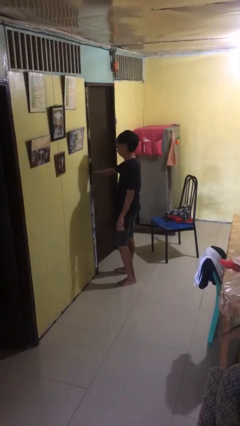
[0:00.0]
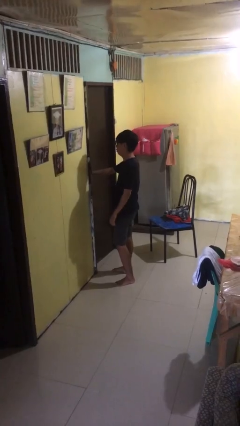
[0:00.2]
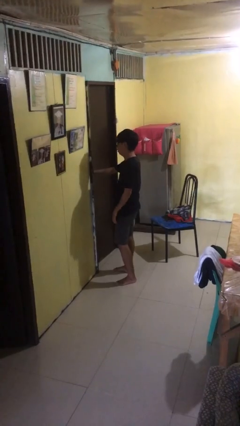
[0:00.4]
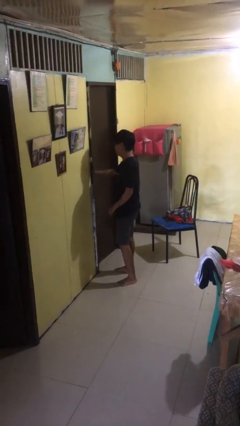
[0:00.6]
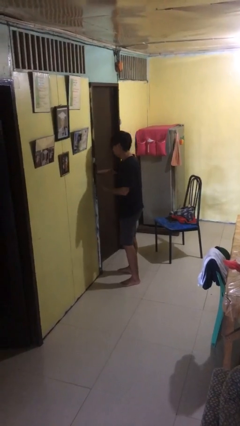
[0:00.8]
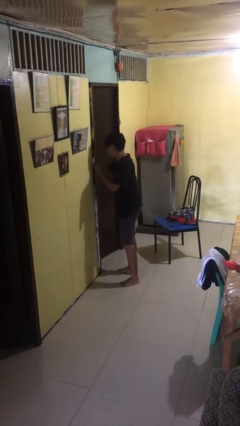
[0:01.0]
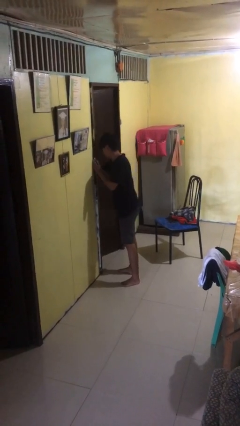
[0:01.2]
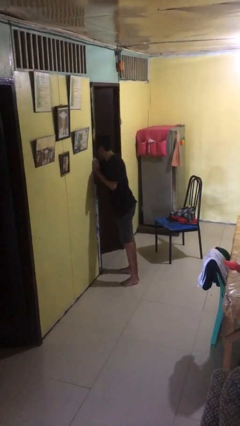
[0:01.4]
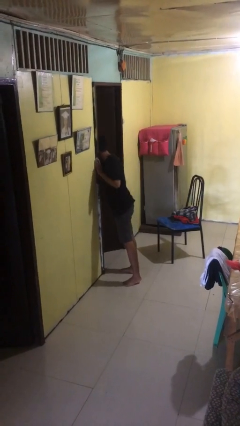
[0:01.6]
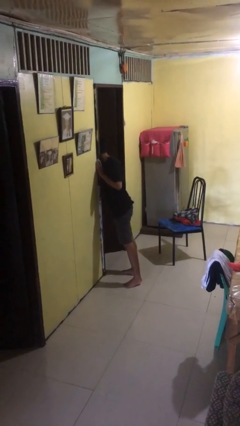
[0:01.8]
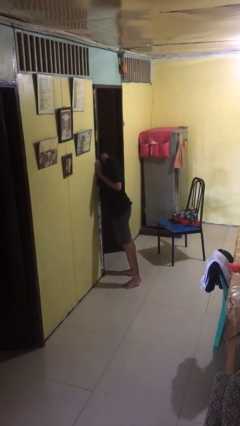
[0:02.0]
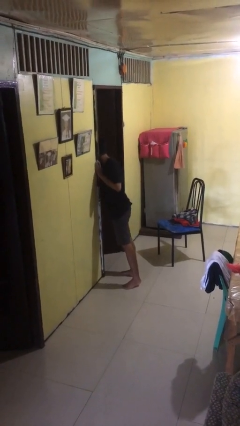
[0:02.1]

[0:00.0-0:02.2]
person opens facility door

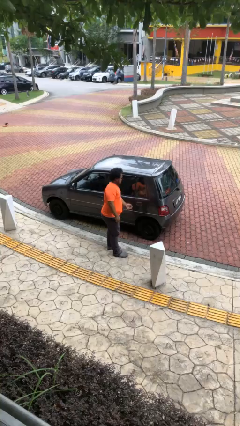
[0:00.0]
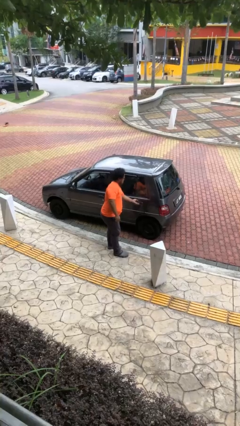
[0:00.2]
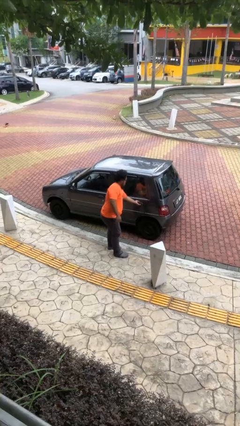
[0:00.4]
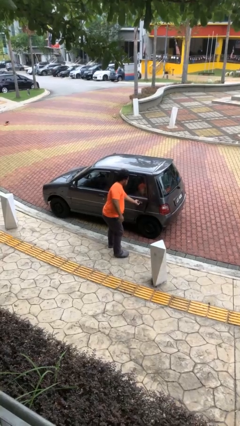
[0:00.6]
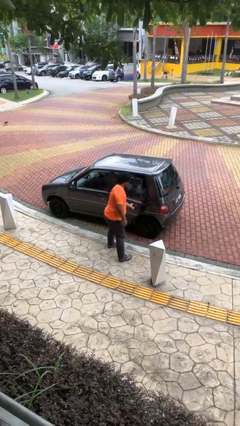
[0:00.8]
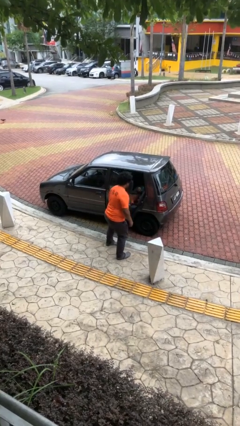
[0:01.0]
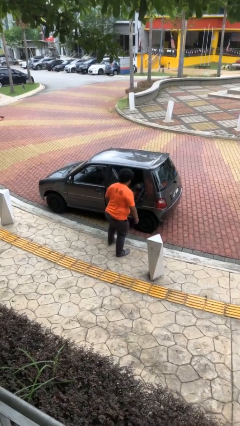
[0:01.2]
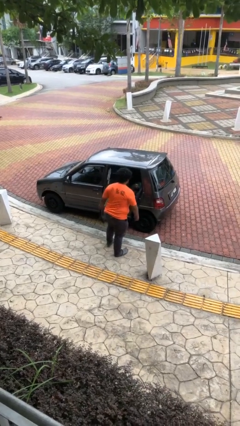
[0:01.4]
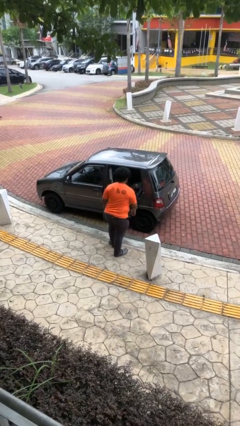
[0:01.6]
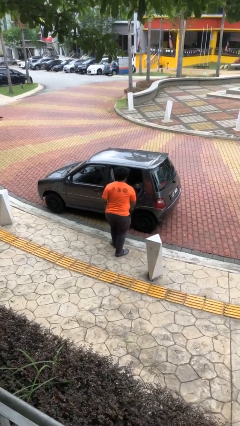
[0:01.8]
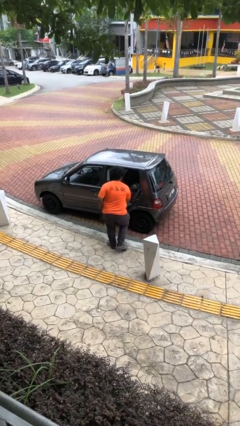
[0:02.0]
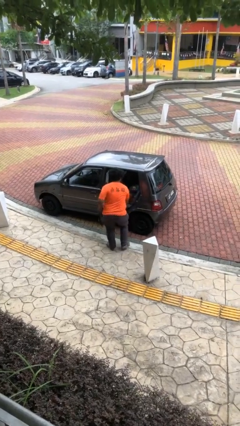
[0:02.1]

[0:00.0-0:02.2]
person opens car door

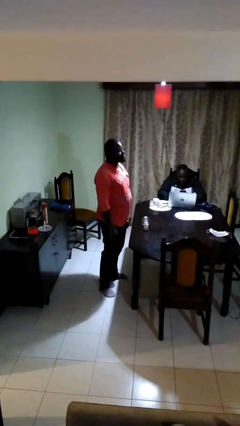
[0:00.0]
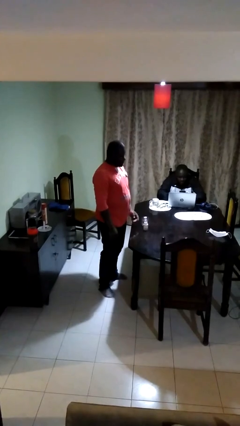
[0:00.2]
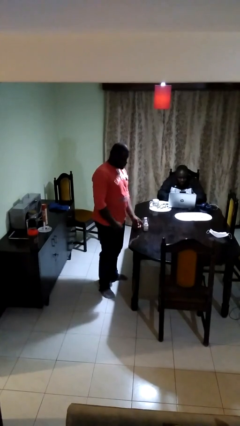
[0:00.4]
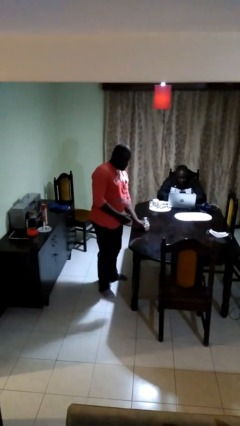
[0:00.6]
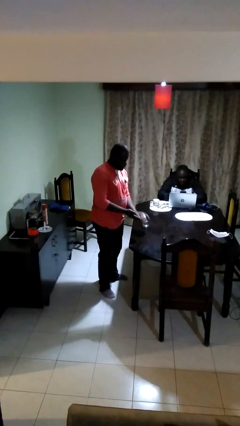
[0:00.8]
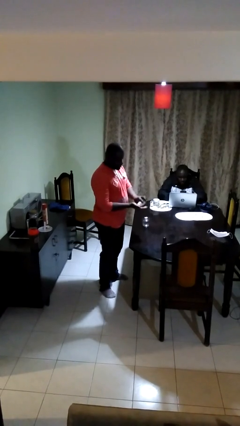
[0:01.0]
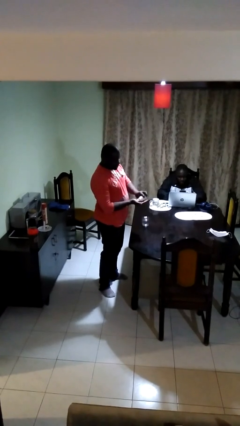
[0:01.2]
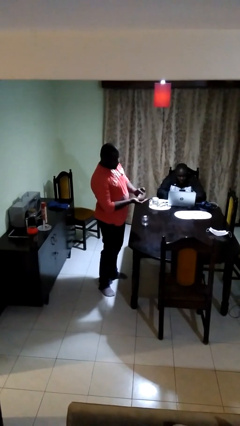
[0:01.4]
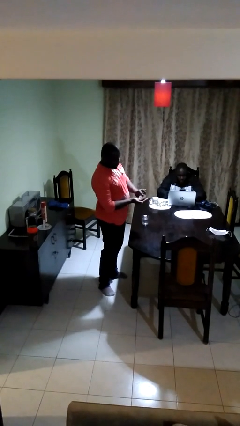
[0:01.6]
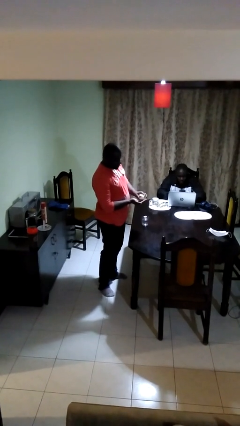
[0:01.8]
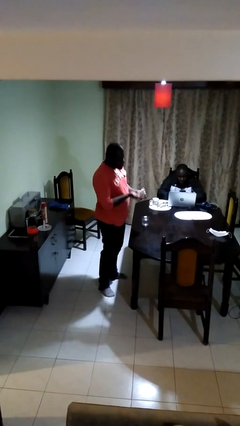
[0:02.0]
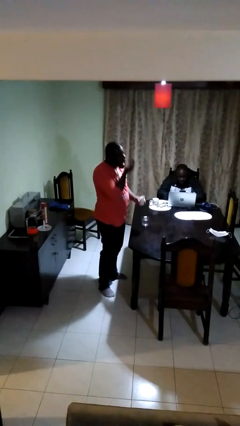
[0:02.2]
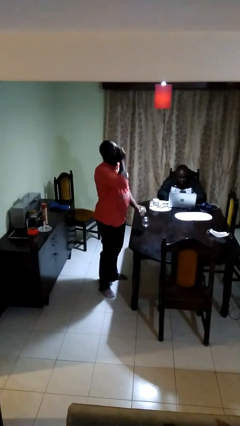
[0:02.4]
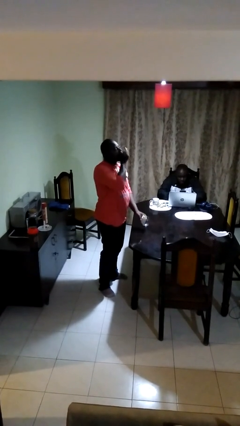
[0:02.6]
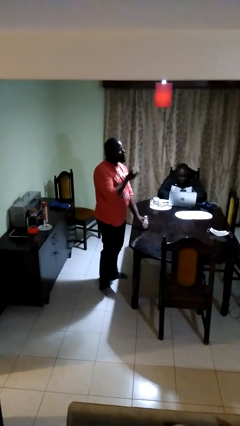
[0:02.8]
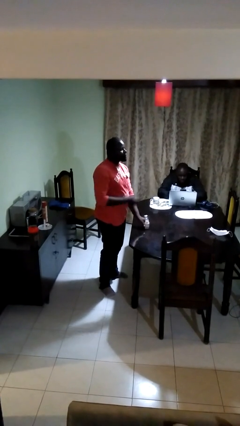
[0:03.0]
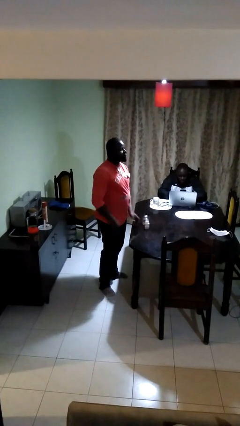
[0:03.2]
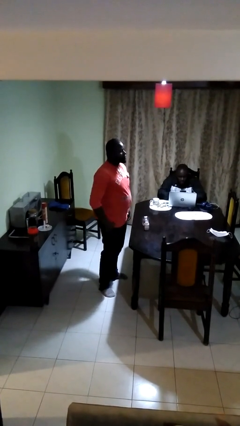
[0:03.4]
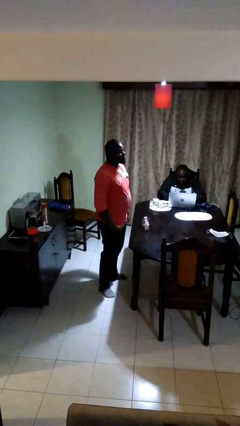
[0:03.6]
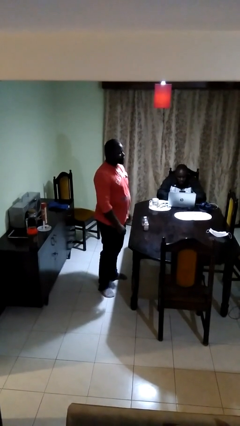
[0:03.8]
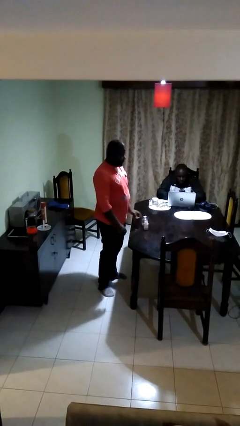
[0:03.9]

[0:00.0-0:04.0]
person takes medicine pills

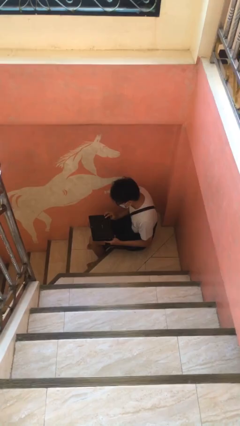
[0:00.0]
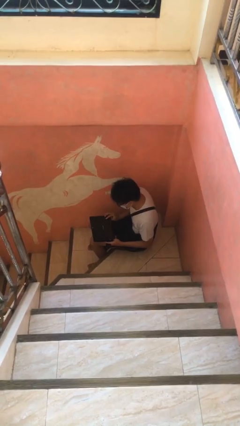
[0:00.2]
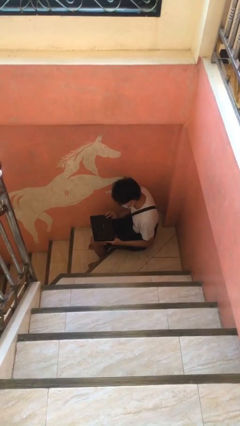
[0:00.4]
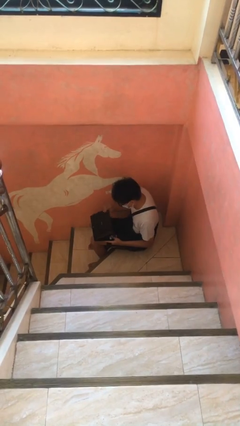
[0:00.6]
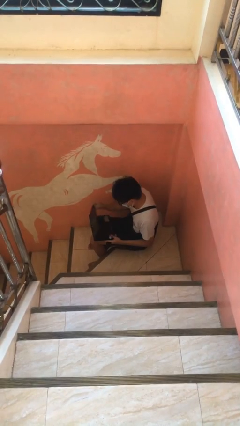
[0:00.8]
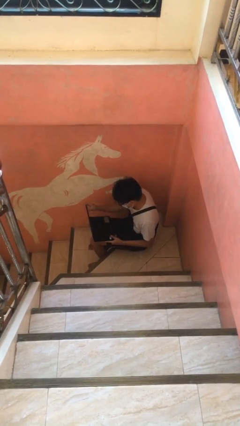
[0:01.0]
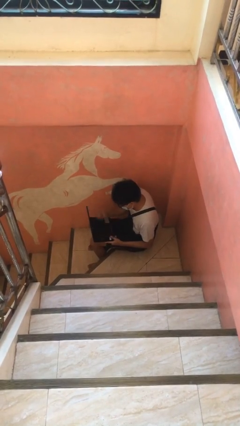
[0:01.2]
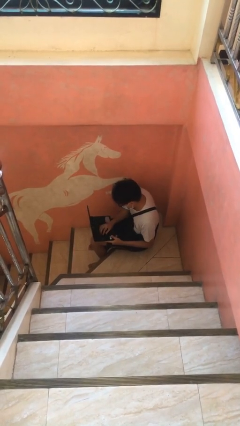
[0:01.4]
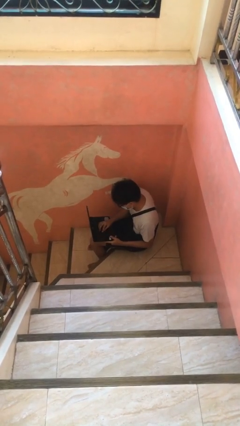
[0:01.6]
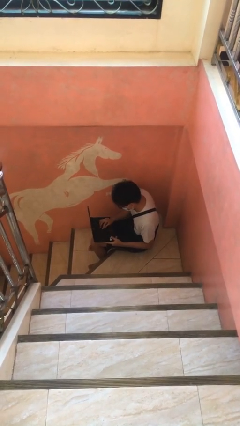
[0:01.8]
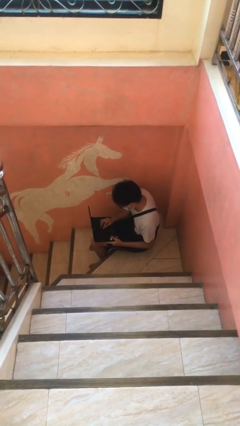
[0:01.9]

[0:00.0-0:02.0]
person interacts with laptop

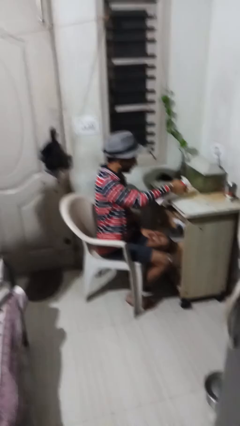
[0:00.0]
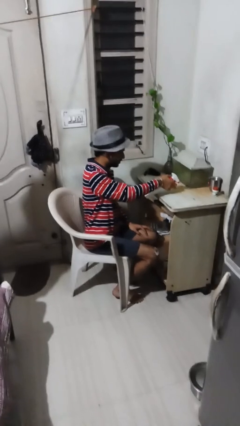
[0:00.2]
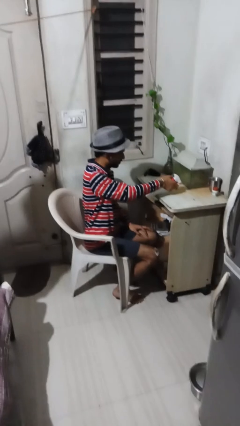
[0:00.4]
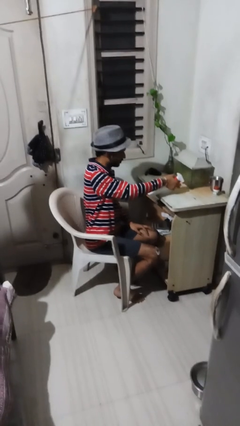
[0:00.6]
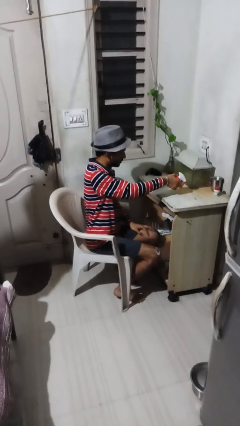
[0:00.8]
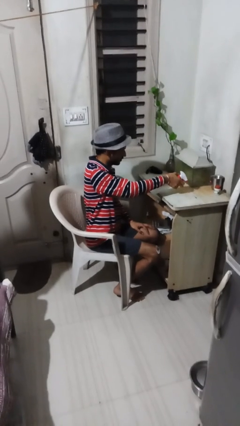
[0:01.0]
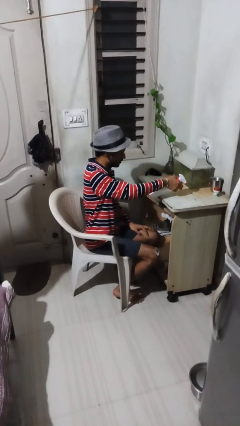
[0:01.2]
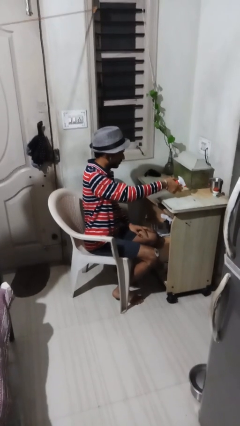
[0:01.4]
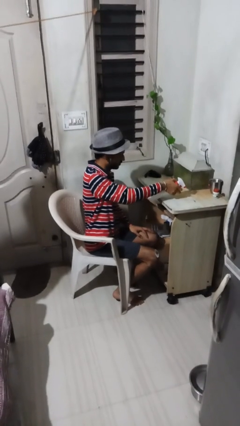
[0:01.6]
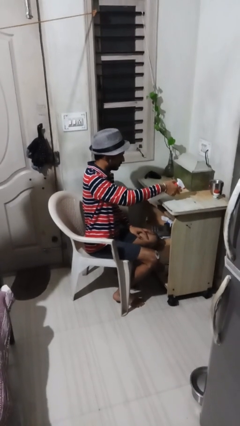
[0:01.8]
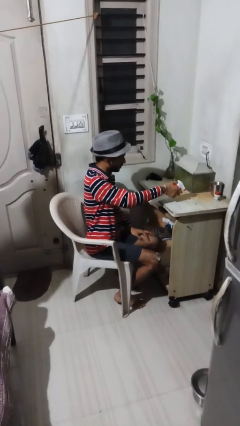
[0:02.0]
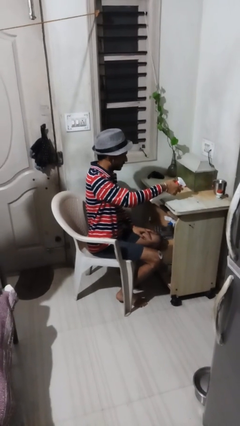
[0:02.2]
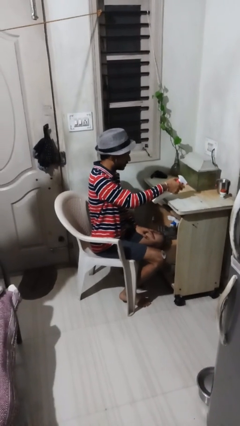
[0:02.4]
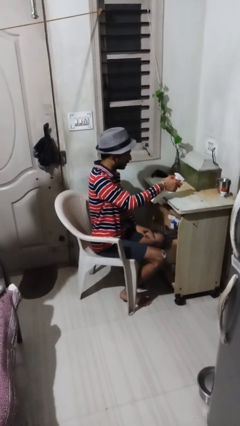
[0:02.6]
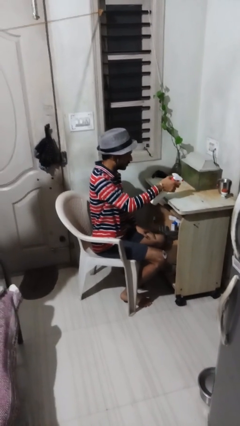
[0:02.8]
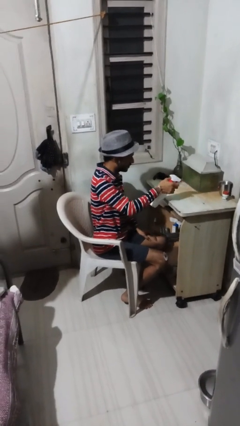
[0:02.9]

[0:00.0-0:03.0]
person sprays from bottle

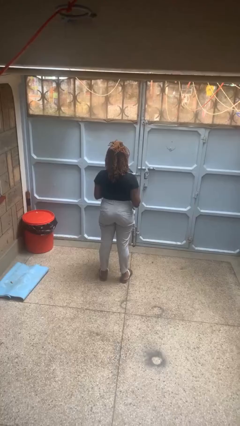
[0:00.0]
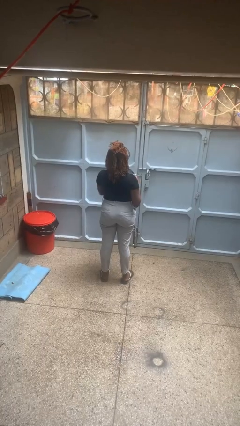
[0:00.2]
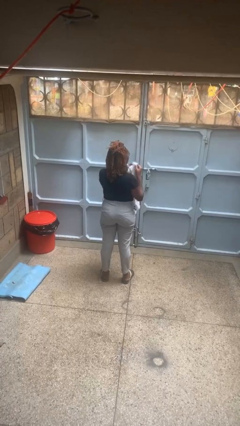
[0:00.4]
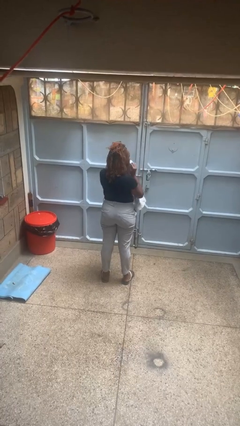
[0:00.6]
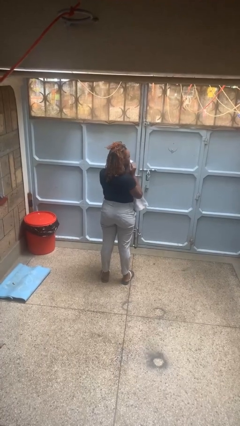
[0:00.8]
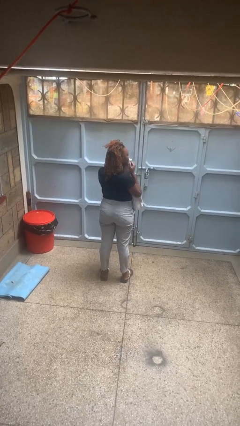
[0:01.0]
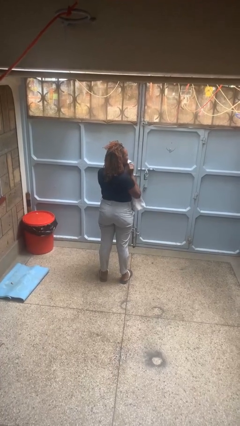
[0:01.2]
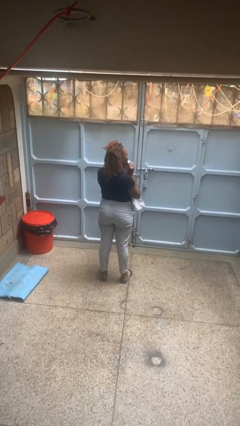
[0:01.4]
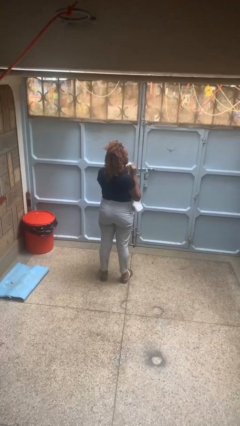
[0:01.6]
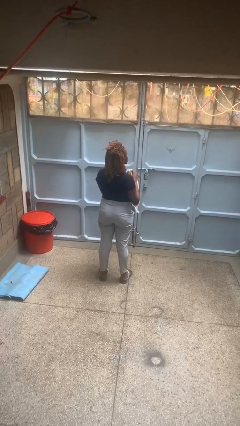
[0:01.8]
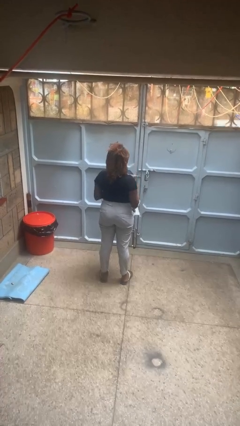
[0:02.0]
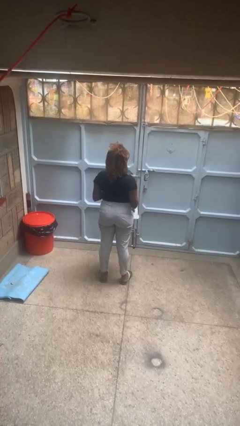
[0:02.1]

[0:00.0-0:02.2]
person wipes mouth with napkin

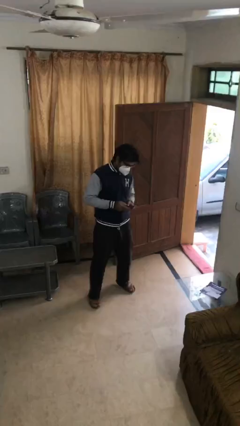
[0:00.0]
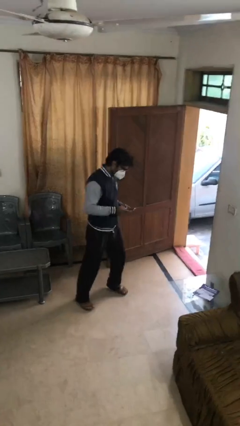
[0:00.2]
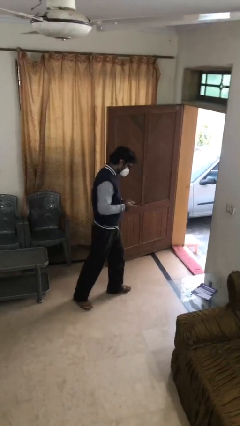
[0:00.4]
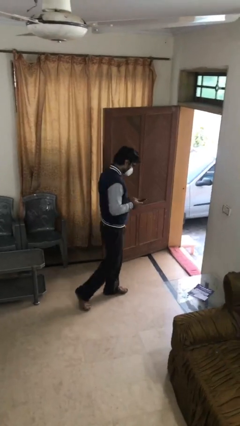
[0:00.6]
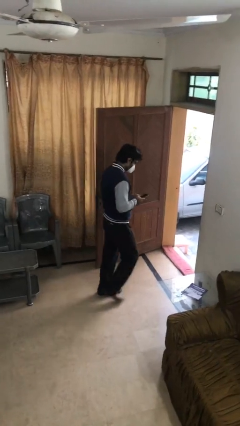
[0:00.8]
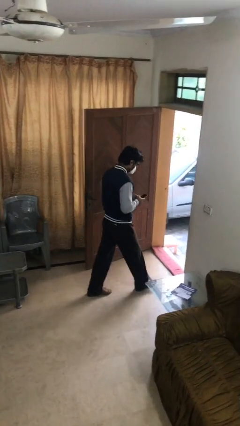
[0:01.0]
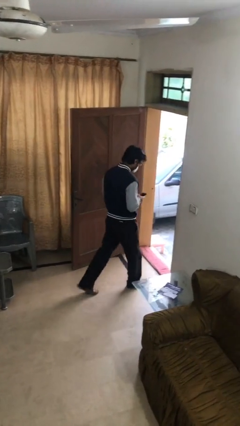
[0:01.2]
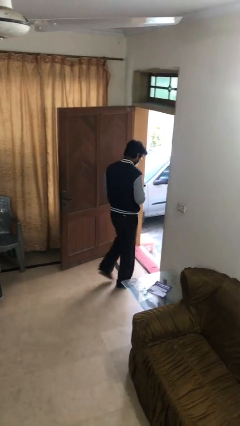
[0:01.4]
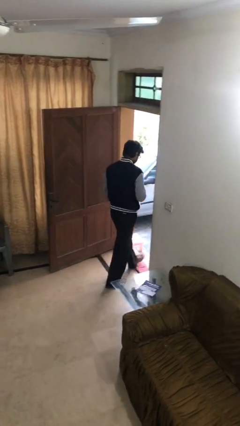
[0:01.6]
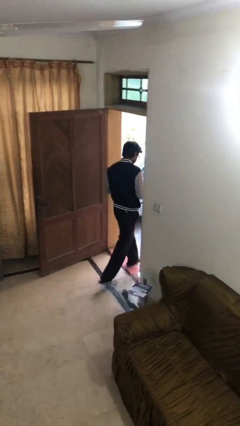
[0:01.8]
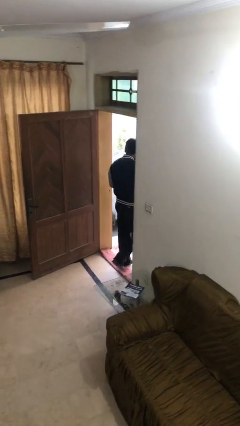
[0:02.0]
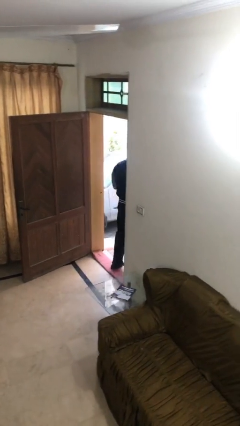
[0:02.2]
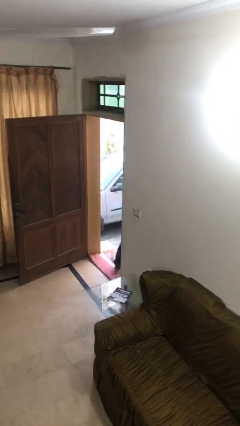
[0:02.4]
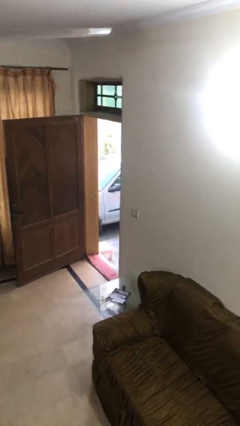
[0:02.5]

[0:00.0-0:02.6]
person exits scene through structure
